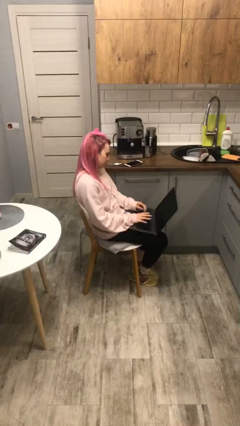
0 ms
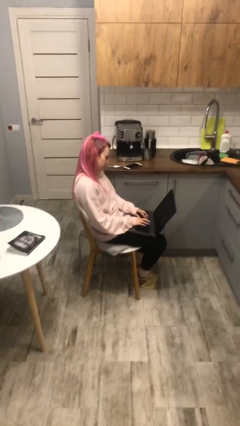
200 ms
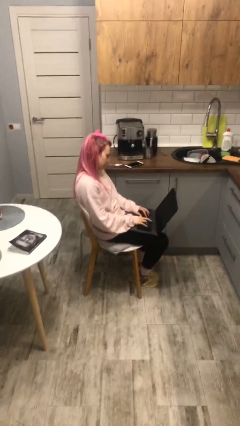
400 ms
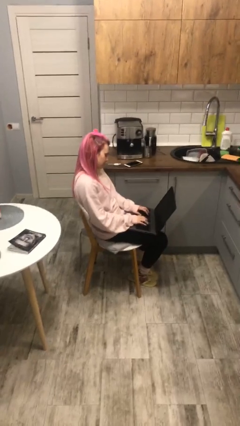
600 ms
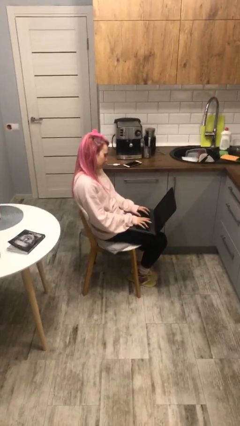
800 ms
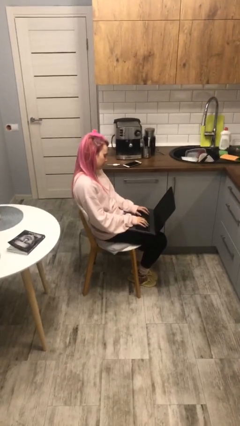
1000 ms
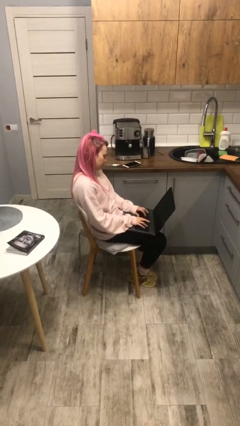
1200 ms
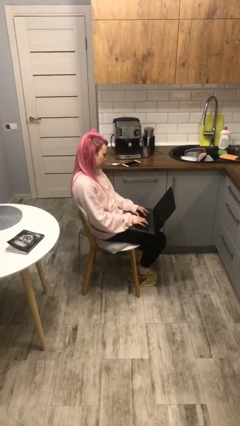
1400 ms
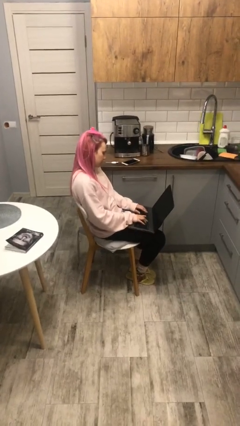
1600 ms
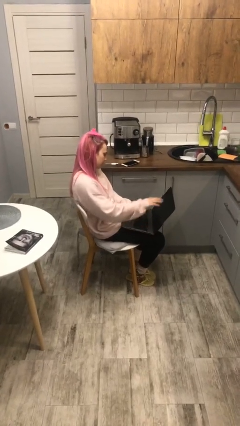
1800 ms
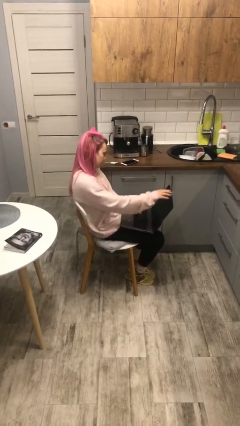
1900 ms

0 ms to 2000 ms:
person interacts with laptop

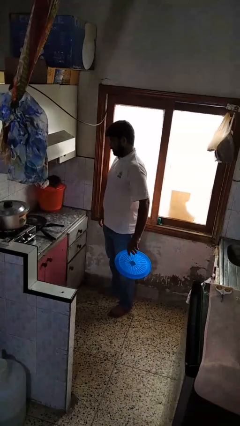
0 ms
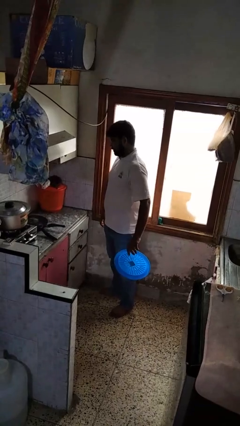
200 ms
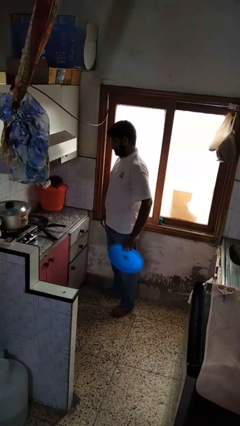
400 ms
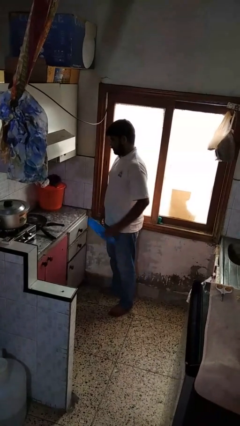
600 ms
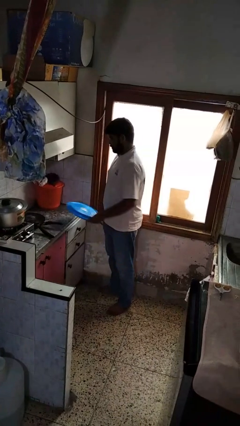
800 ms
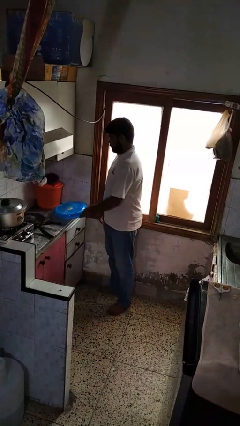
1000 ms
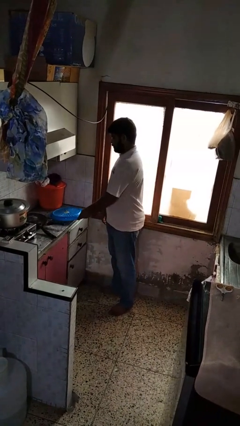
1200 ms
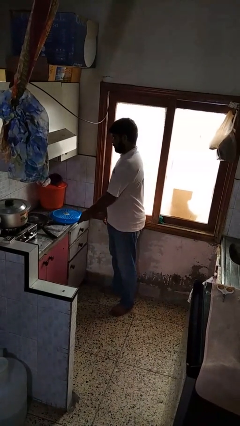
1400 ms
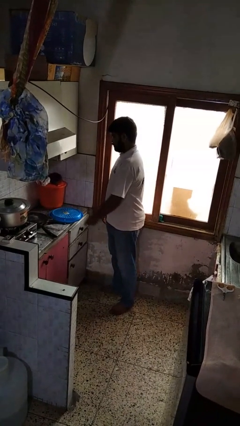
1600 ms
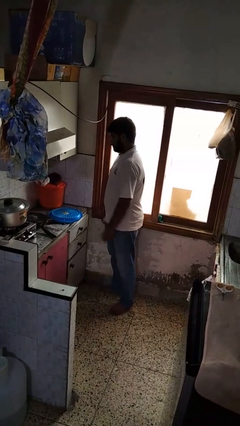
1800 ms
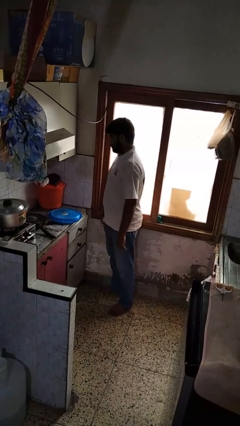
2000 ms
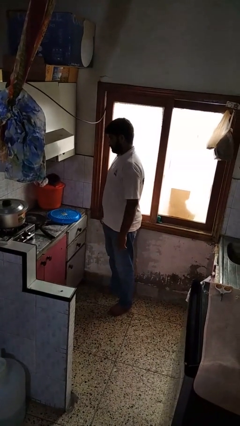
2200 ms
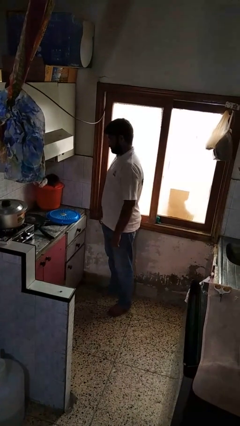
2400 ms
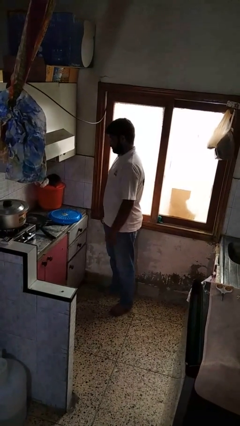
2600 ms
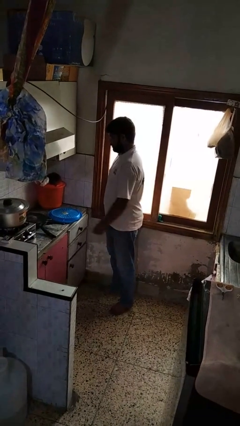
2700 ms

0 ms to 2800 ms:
person puts down object on countertop

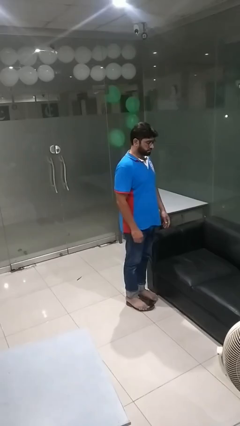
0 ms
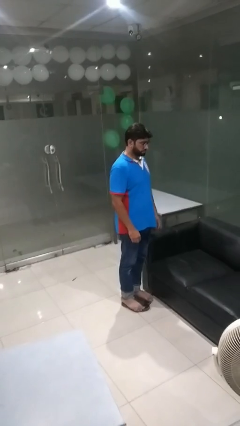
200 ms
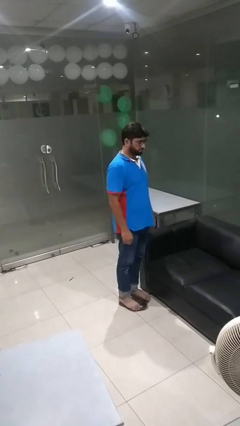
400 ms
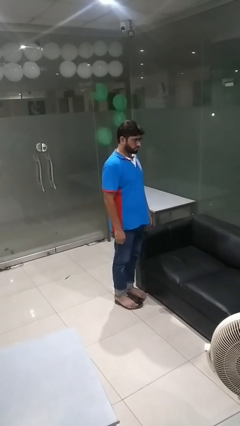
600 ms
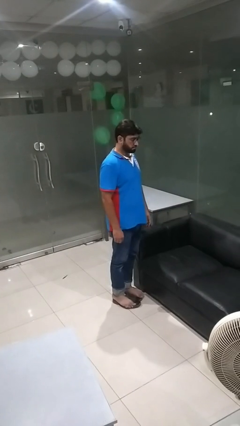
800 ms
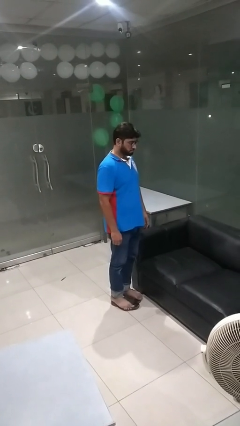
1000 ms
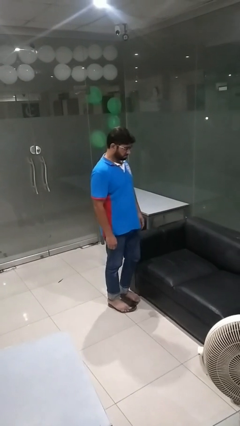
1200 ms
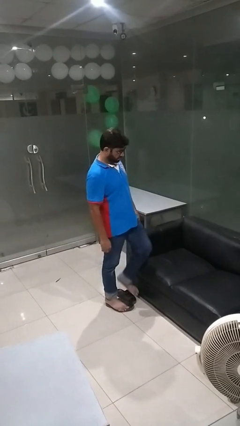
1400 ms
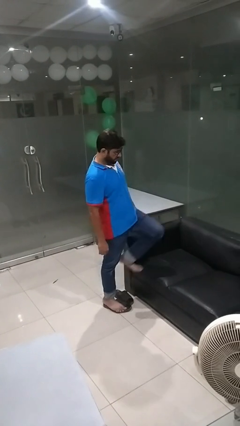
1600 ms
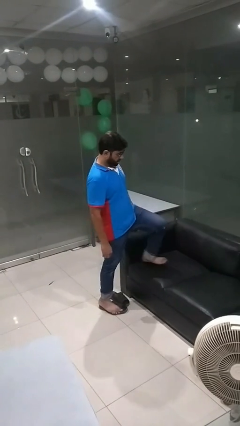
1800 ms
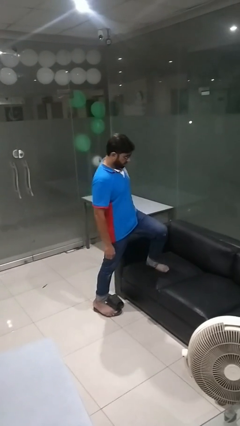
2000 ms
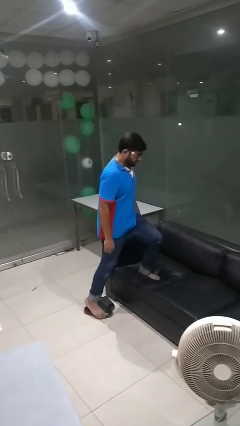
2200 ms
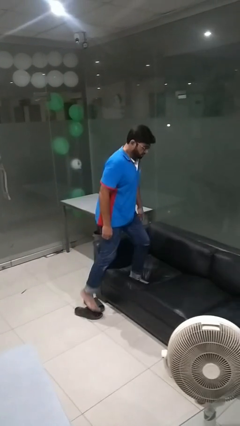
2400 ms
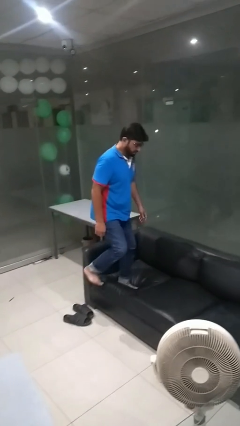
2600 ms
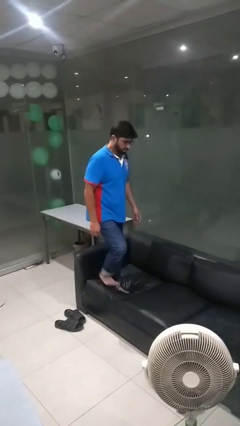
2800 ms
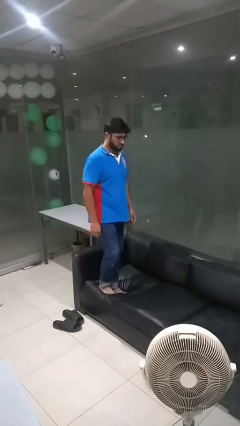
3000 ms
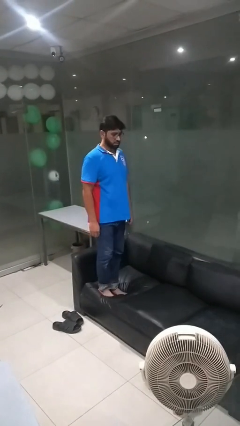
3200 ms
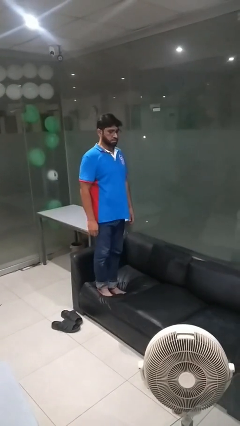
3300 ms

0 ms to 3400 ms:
person climbs on couch

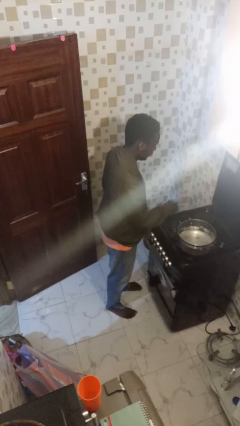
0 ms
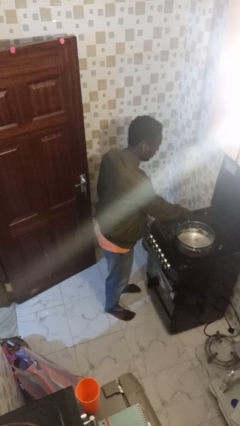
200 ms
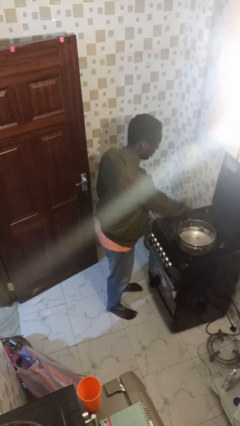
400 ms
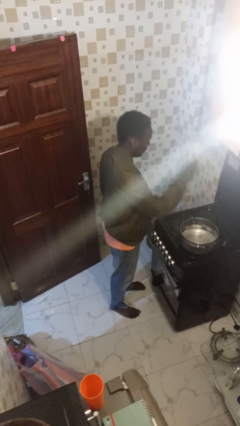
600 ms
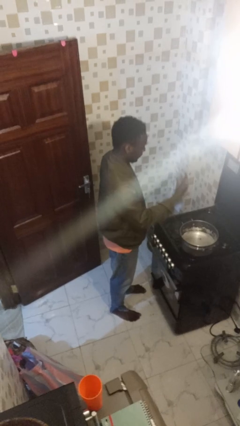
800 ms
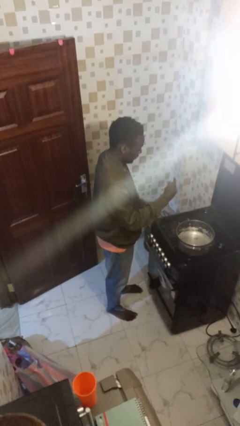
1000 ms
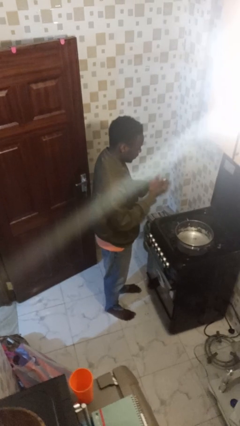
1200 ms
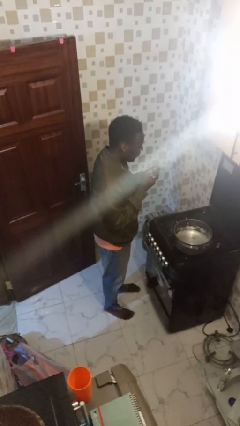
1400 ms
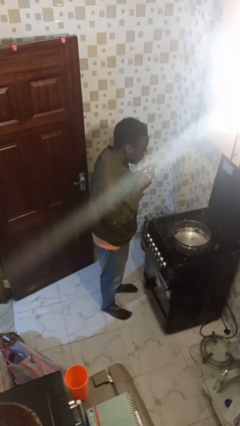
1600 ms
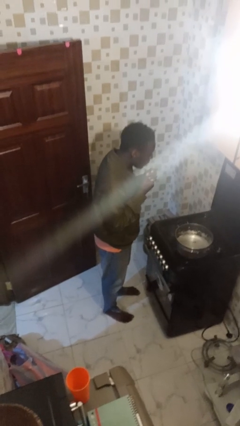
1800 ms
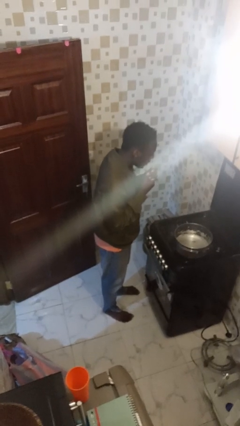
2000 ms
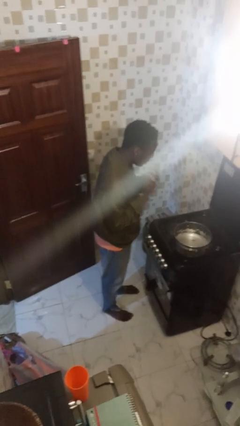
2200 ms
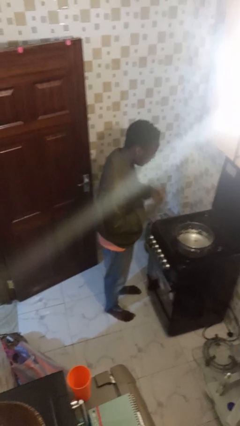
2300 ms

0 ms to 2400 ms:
person burns hand

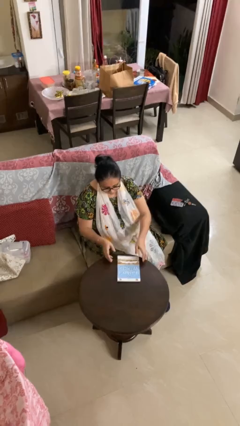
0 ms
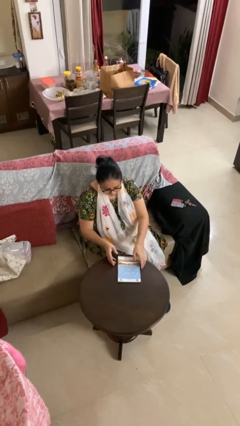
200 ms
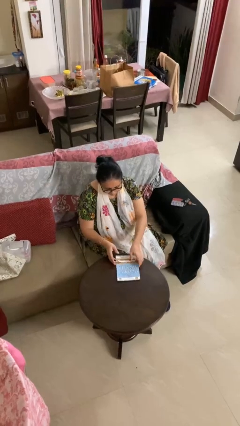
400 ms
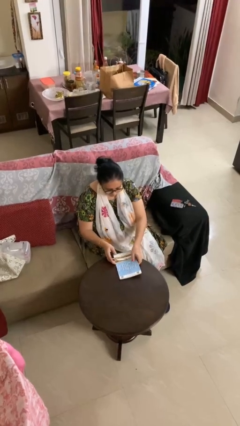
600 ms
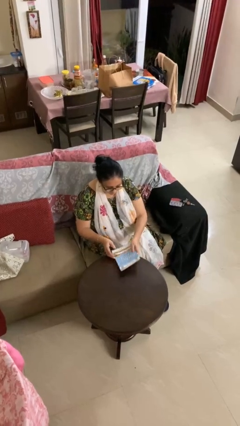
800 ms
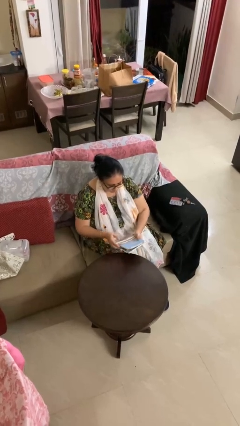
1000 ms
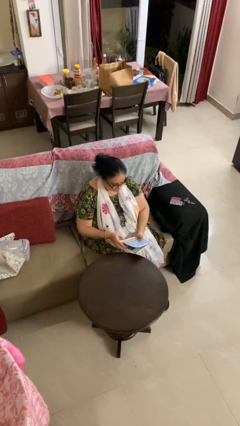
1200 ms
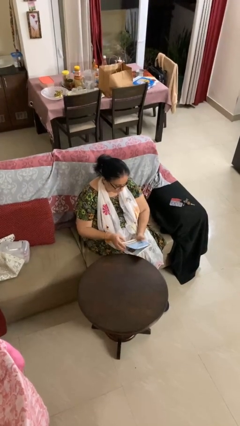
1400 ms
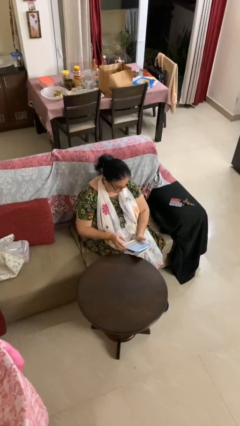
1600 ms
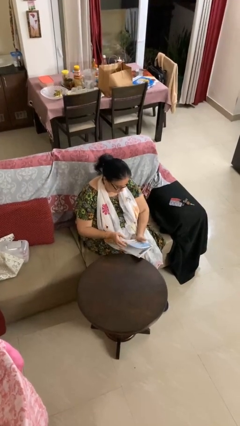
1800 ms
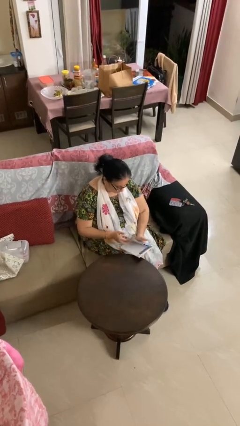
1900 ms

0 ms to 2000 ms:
person picks up object from table

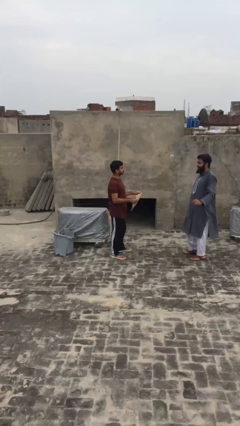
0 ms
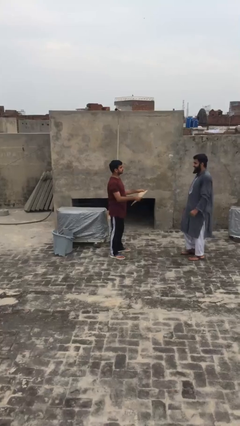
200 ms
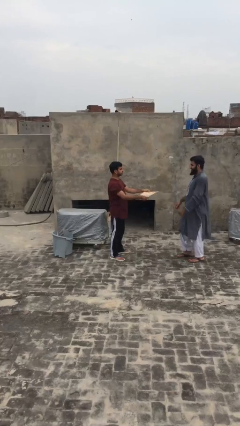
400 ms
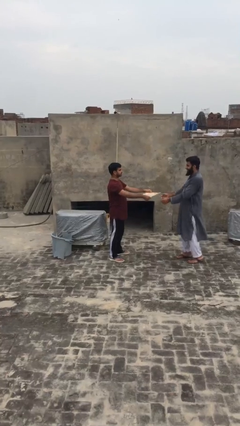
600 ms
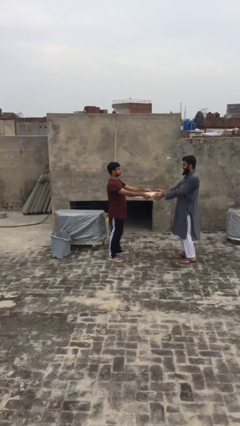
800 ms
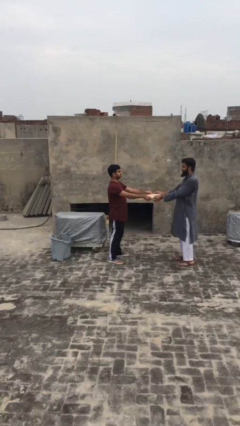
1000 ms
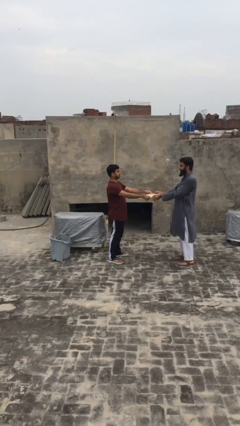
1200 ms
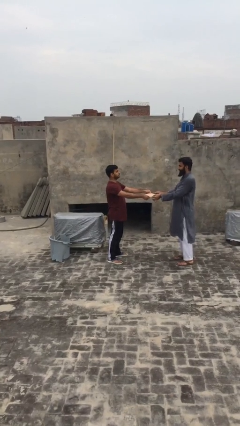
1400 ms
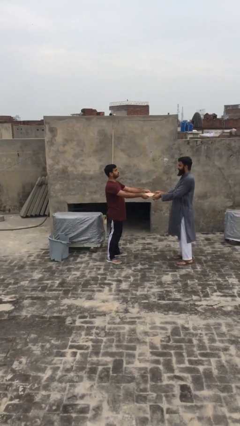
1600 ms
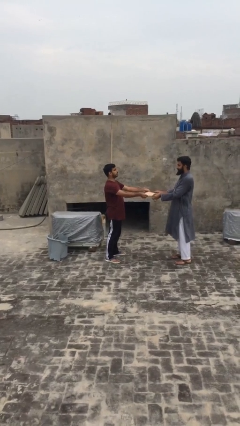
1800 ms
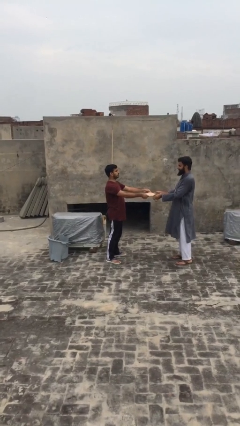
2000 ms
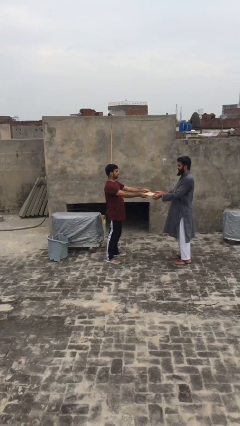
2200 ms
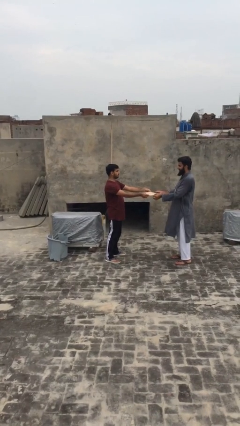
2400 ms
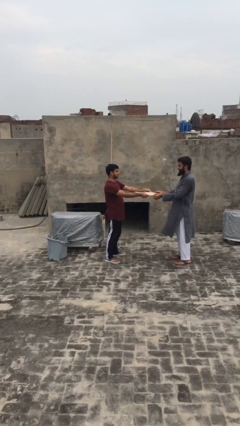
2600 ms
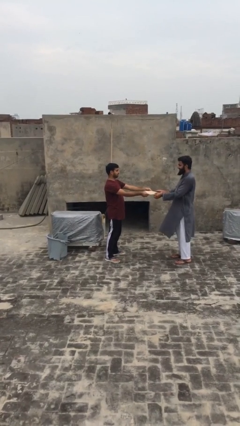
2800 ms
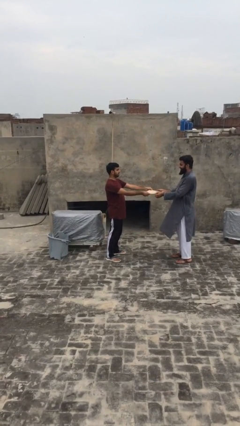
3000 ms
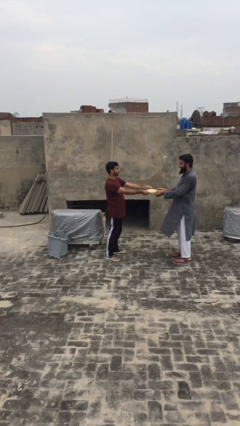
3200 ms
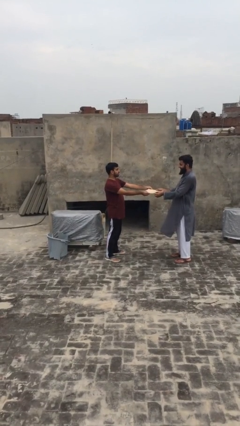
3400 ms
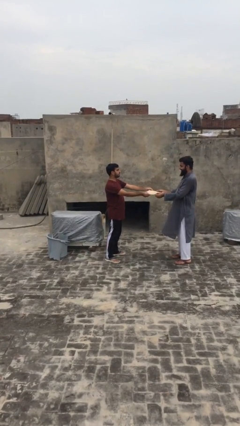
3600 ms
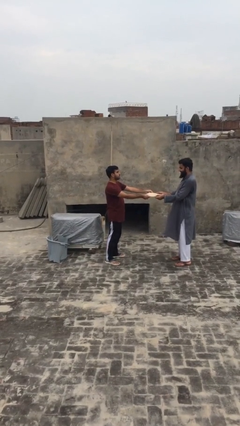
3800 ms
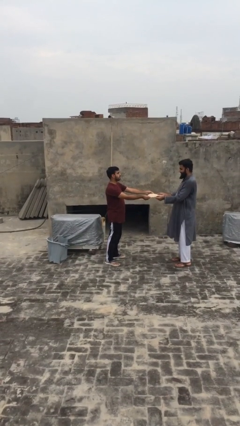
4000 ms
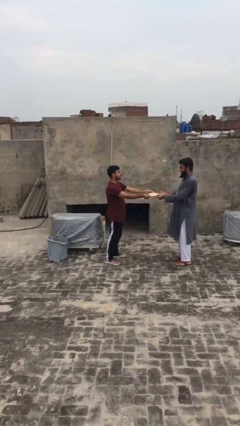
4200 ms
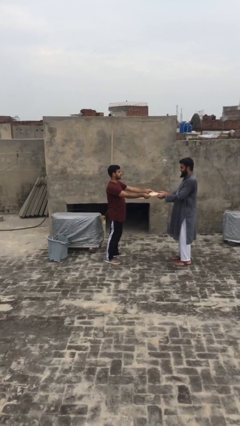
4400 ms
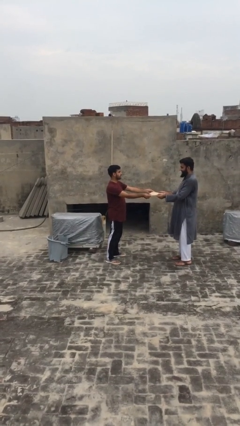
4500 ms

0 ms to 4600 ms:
person transfers object to person

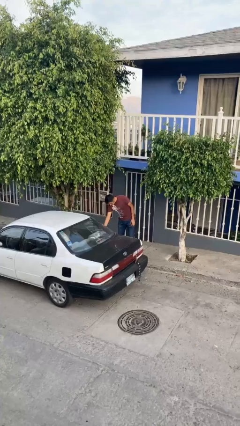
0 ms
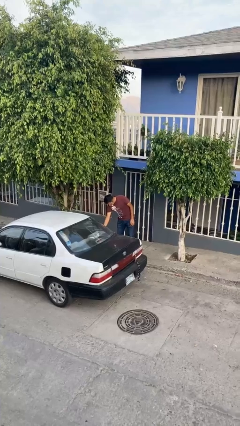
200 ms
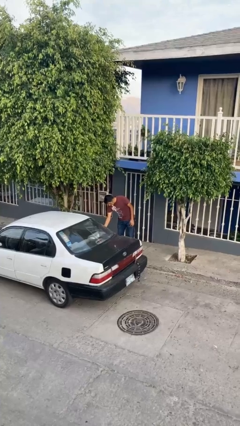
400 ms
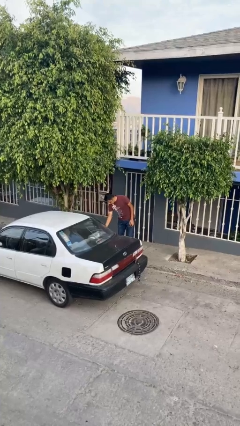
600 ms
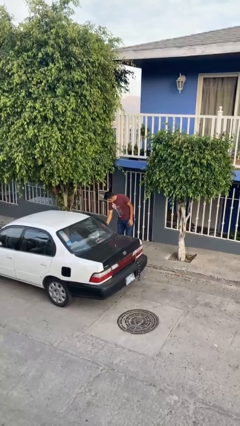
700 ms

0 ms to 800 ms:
person opens car door
